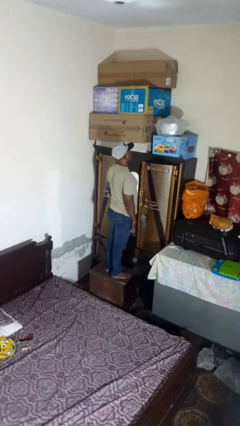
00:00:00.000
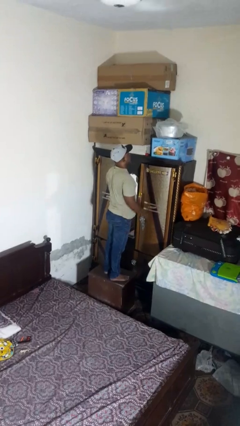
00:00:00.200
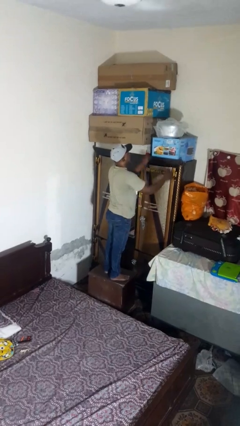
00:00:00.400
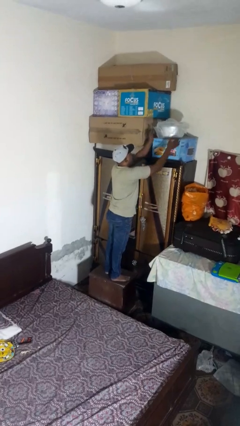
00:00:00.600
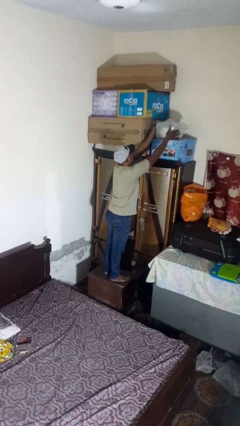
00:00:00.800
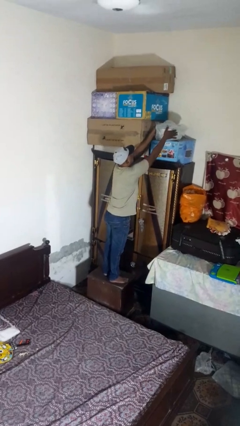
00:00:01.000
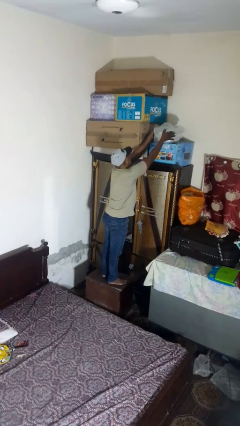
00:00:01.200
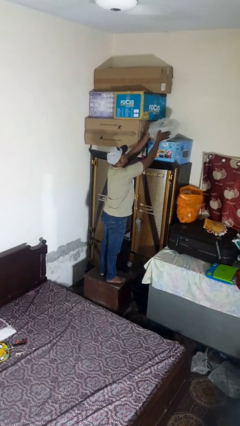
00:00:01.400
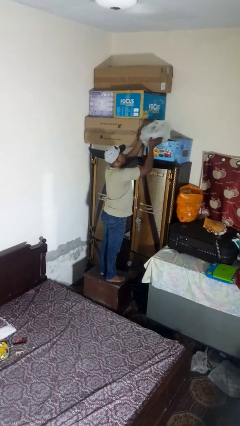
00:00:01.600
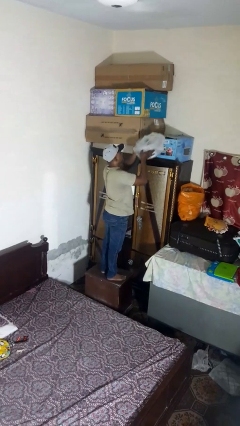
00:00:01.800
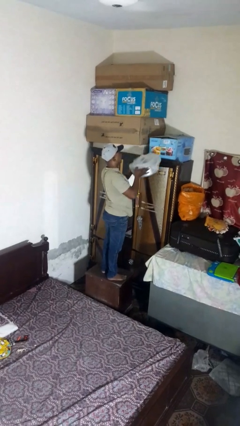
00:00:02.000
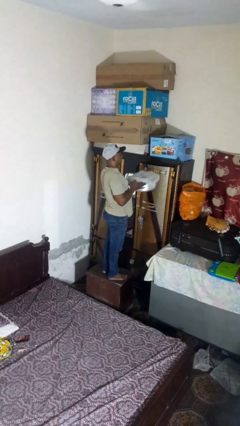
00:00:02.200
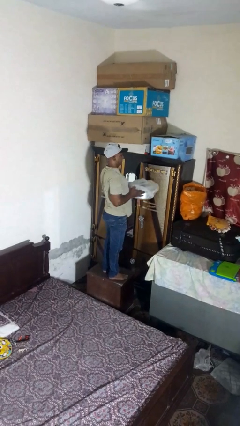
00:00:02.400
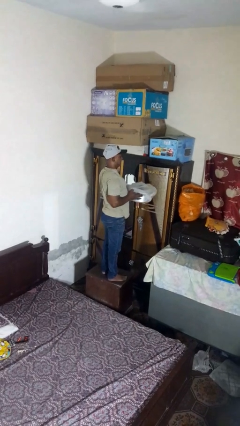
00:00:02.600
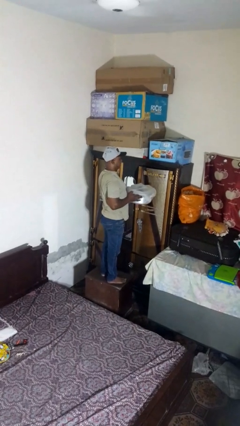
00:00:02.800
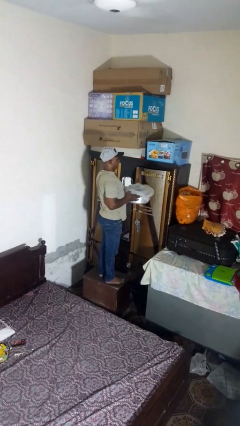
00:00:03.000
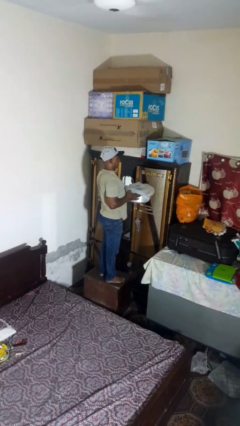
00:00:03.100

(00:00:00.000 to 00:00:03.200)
person puts down object on shelf

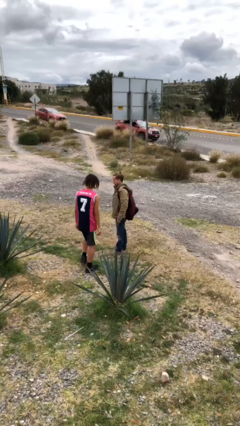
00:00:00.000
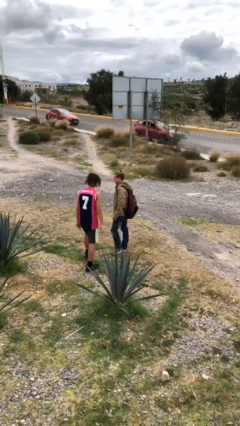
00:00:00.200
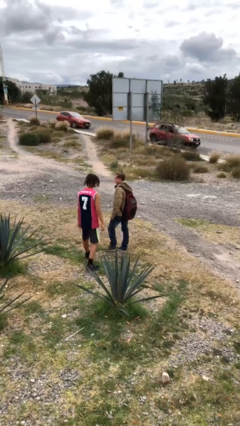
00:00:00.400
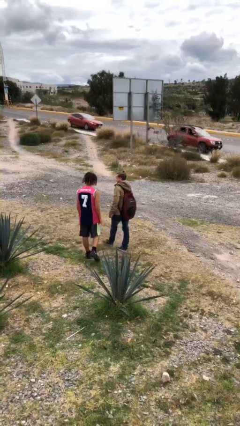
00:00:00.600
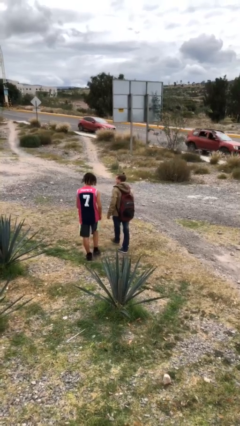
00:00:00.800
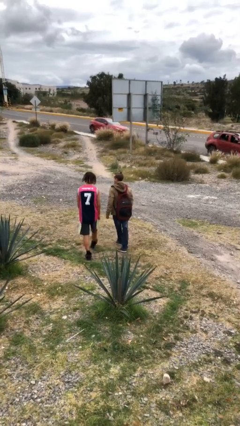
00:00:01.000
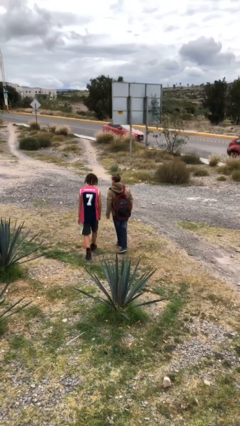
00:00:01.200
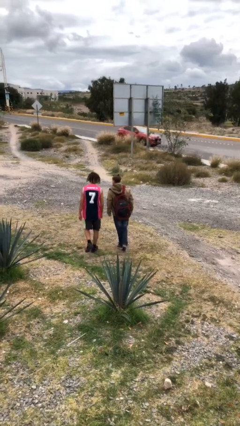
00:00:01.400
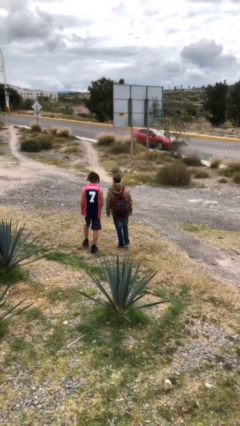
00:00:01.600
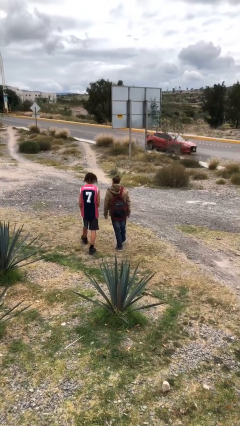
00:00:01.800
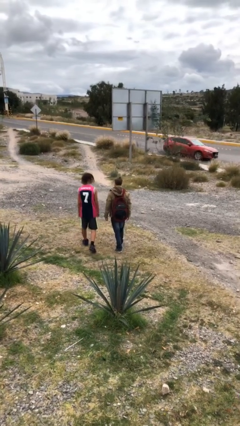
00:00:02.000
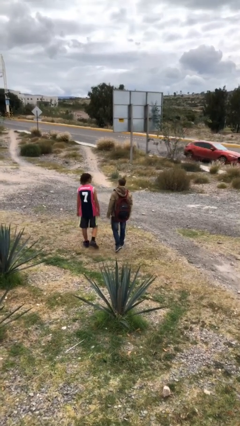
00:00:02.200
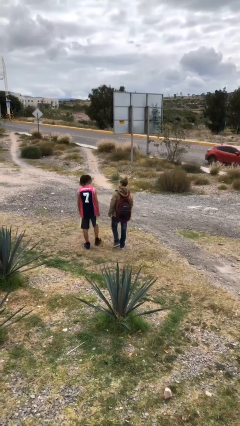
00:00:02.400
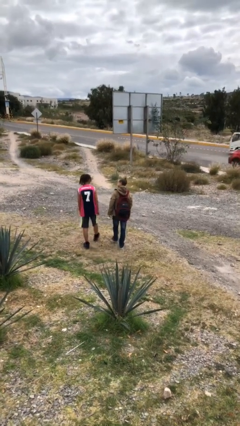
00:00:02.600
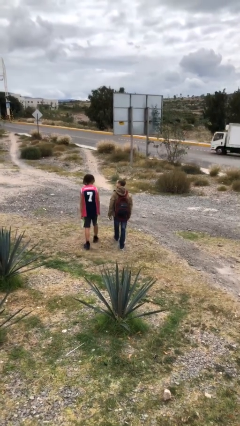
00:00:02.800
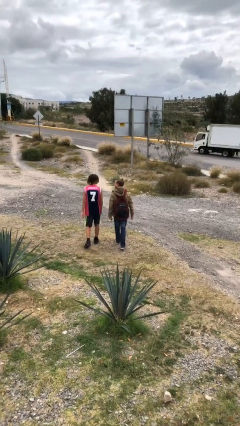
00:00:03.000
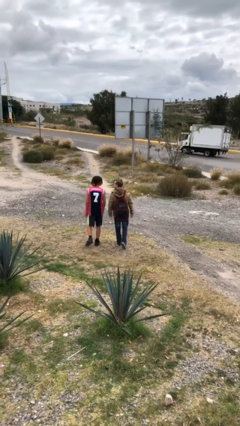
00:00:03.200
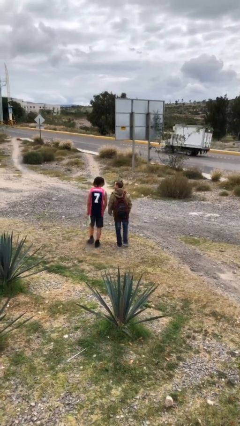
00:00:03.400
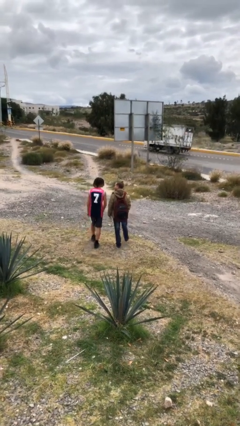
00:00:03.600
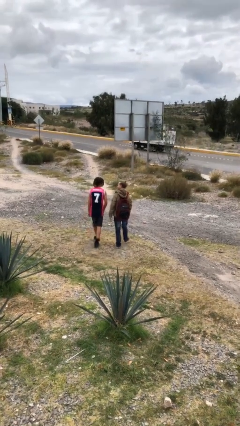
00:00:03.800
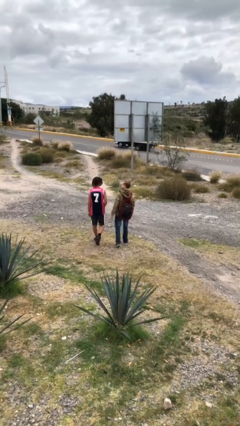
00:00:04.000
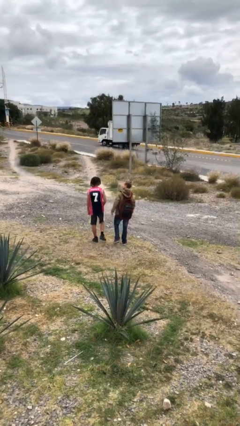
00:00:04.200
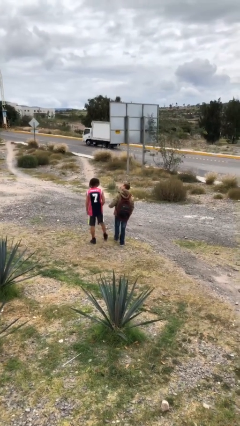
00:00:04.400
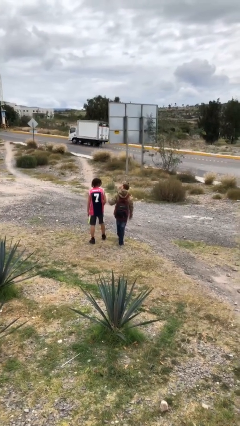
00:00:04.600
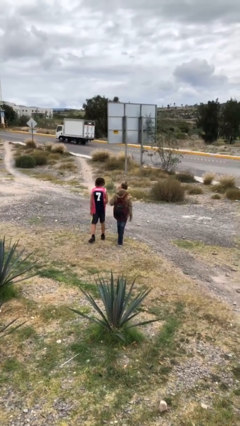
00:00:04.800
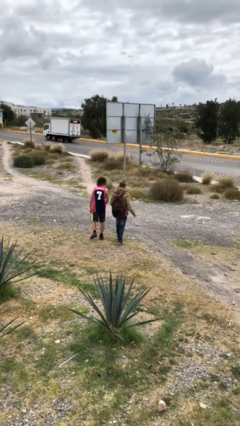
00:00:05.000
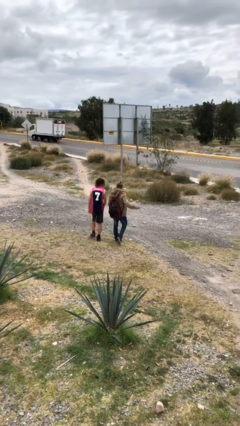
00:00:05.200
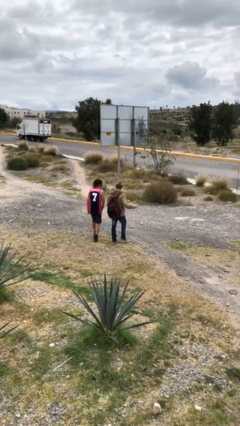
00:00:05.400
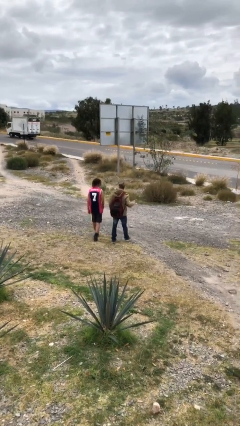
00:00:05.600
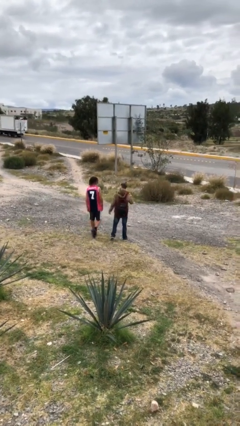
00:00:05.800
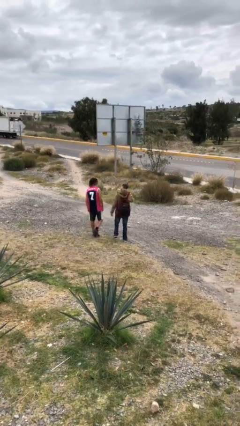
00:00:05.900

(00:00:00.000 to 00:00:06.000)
person talks to person

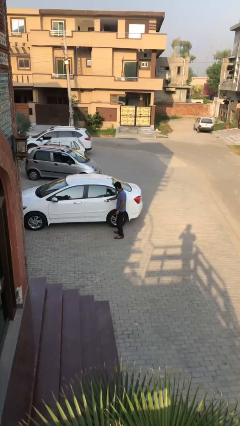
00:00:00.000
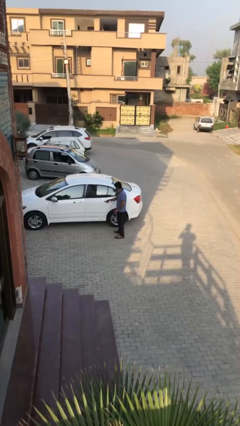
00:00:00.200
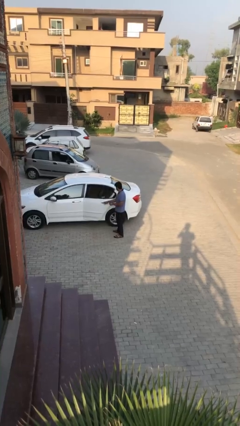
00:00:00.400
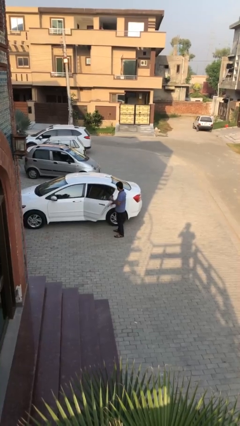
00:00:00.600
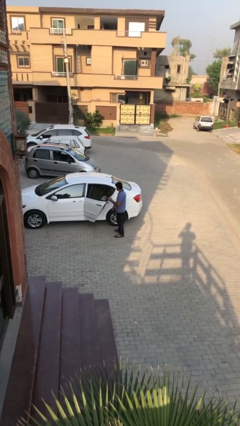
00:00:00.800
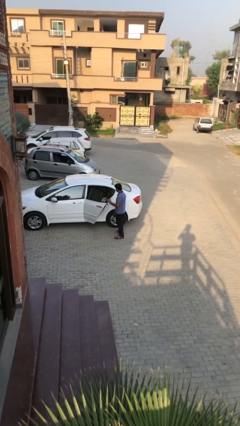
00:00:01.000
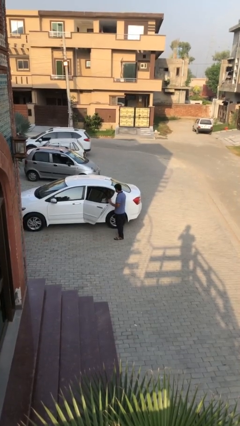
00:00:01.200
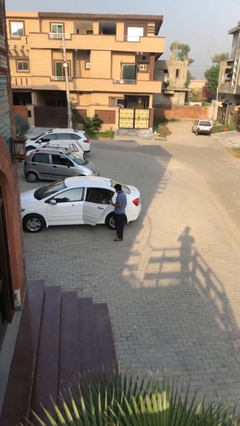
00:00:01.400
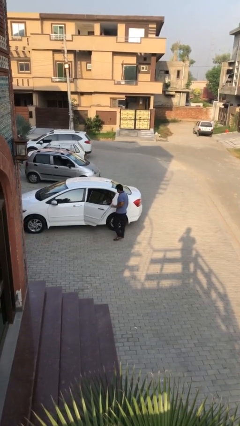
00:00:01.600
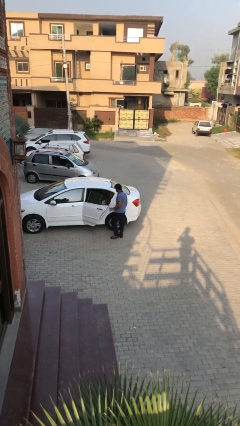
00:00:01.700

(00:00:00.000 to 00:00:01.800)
person opens car door

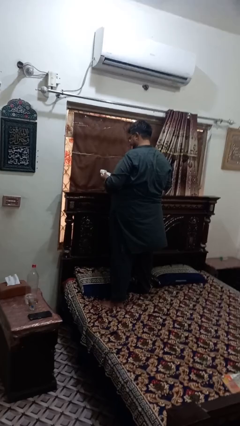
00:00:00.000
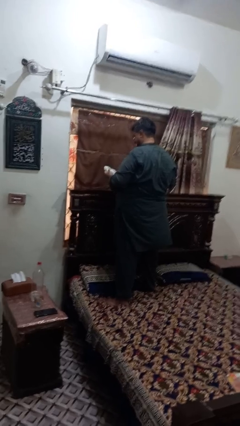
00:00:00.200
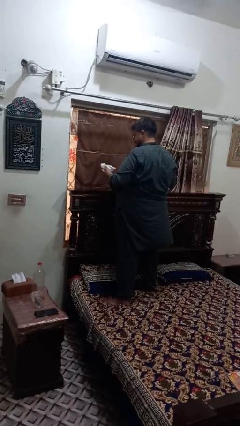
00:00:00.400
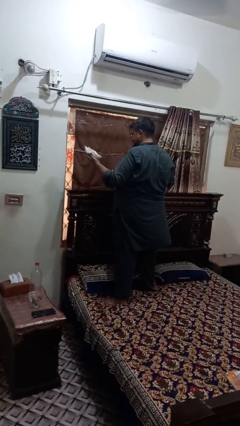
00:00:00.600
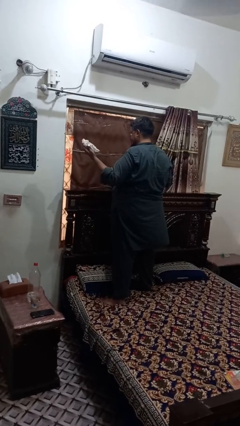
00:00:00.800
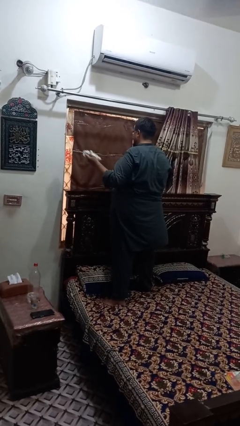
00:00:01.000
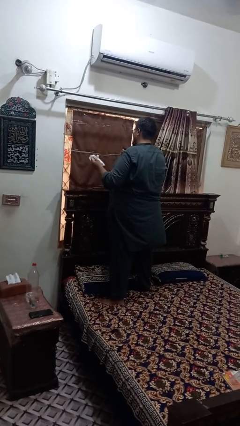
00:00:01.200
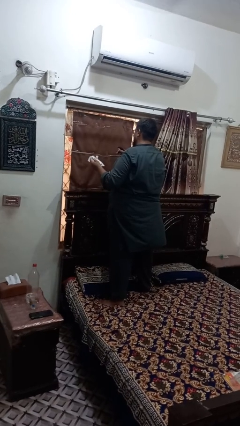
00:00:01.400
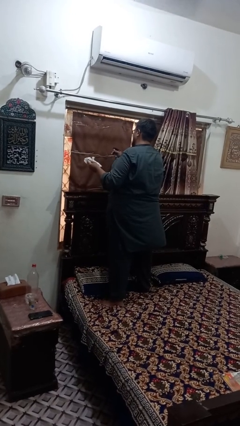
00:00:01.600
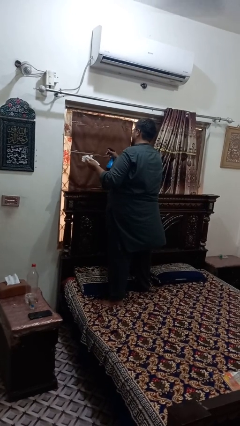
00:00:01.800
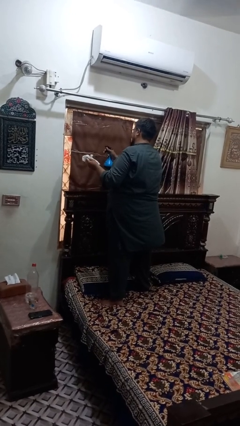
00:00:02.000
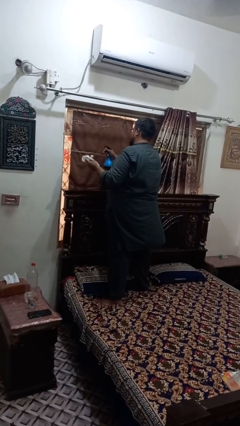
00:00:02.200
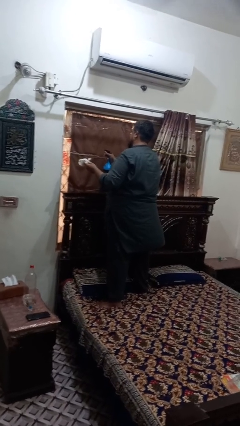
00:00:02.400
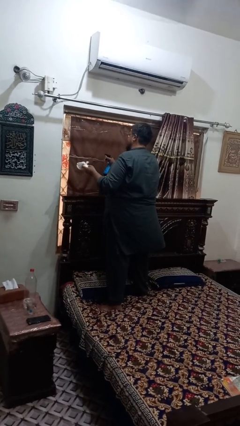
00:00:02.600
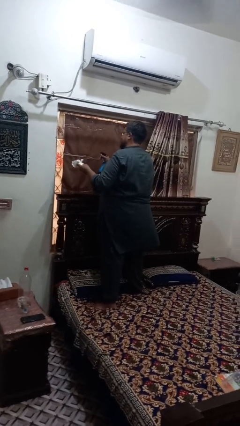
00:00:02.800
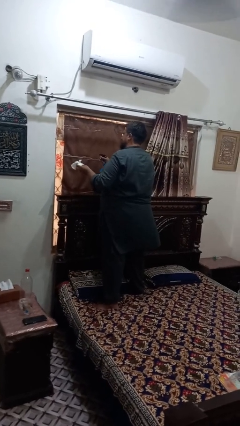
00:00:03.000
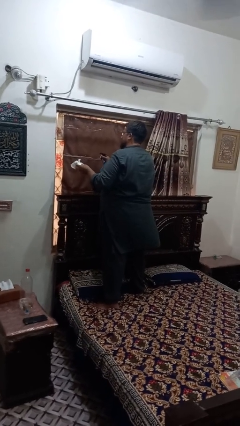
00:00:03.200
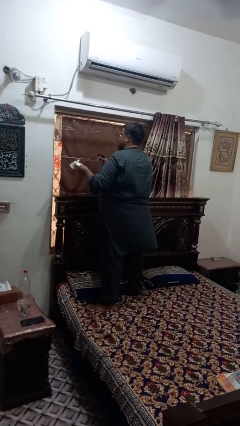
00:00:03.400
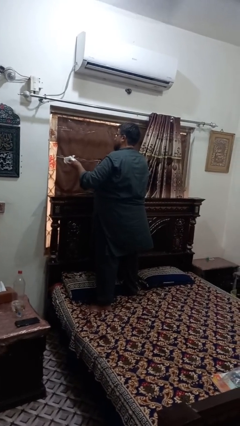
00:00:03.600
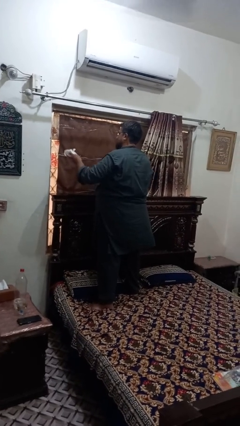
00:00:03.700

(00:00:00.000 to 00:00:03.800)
person sprays from bottle

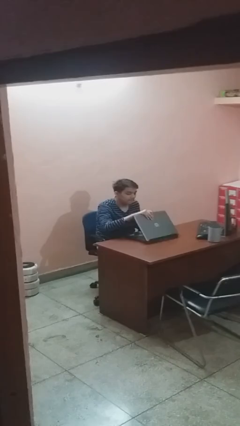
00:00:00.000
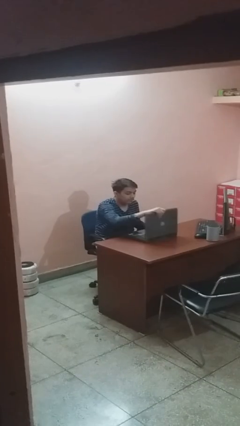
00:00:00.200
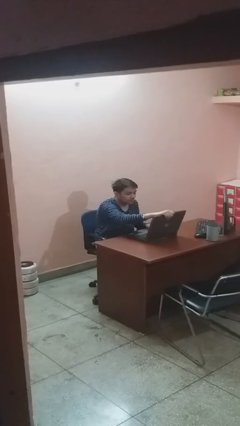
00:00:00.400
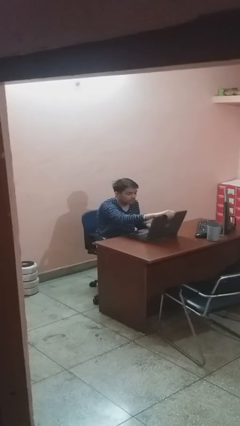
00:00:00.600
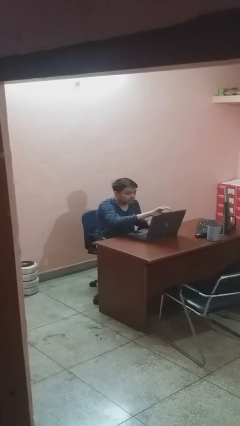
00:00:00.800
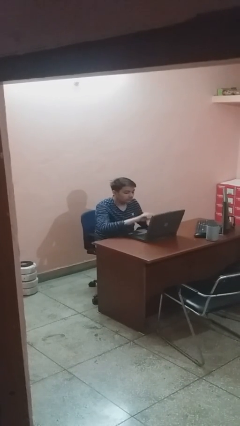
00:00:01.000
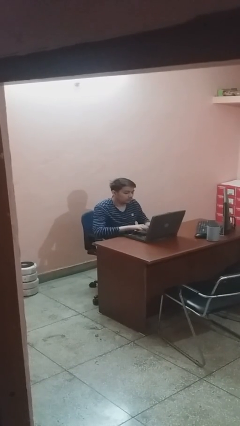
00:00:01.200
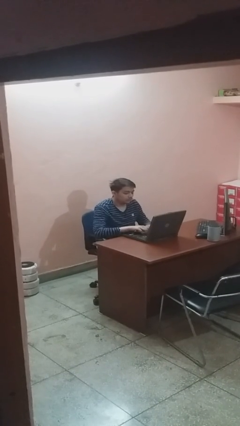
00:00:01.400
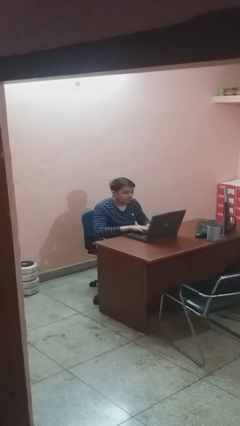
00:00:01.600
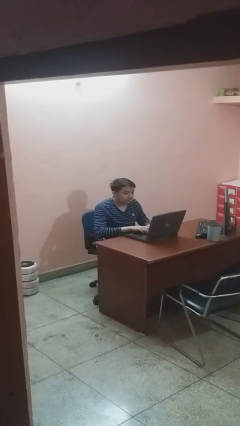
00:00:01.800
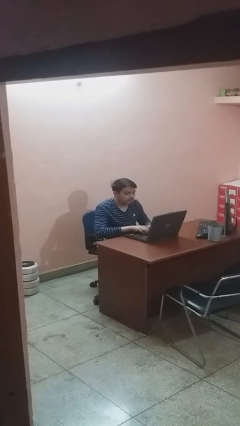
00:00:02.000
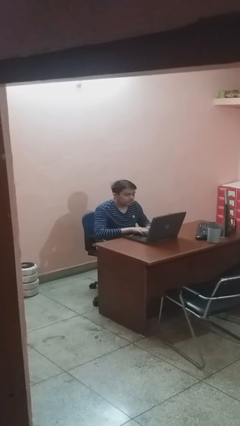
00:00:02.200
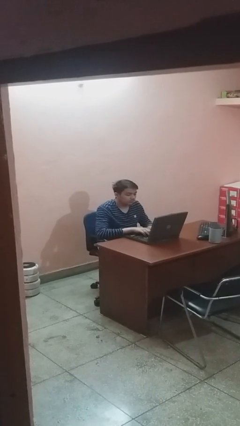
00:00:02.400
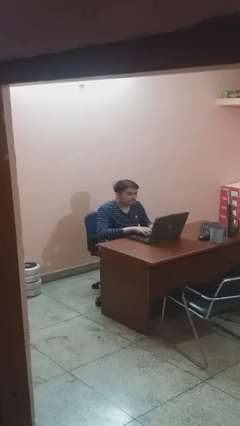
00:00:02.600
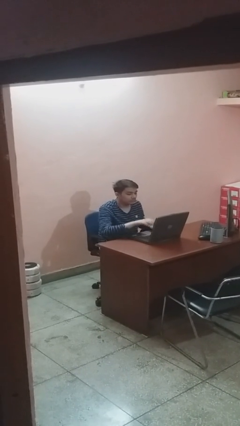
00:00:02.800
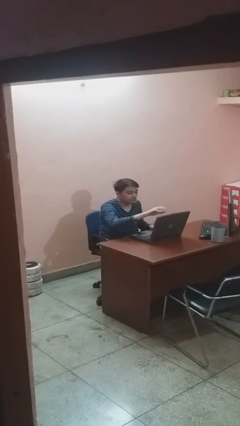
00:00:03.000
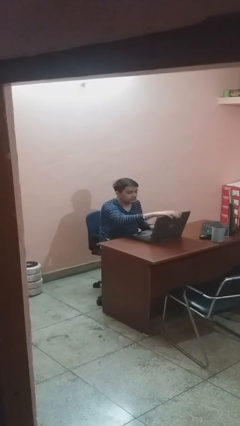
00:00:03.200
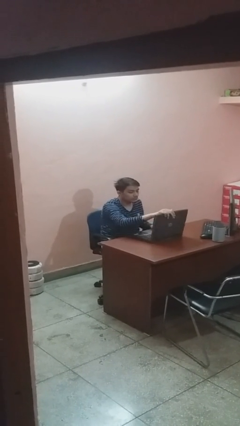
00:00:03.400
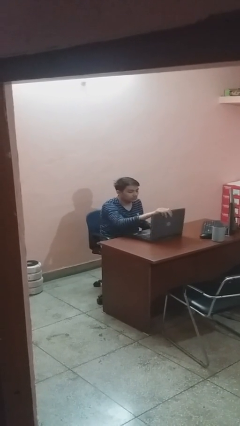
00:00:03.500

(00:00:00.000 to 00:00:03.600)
person interacts with laptop
